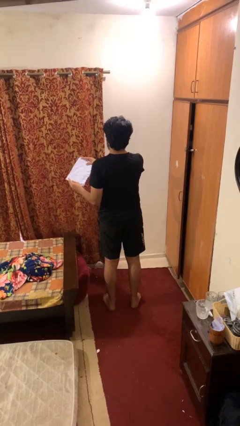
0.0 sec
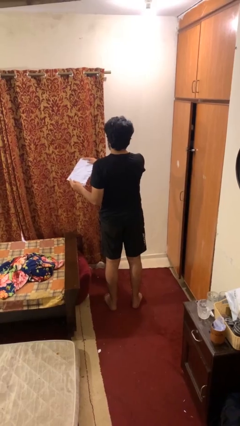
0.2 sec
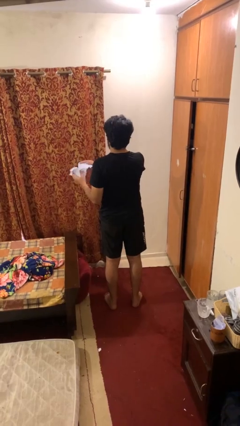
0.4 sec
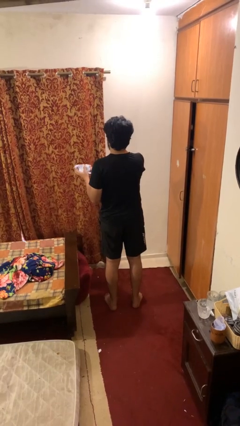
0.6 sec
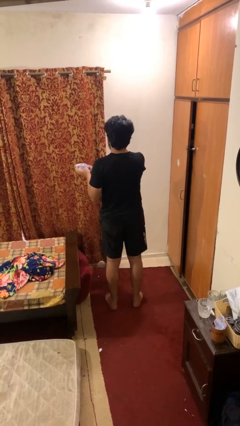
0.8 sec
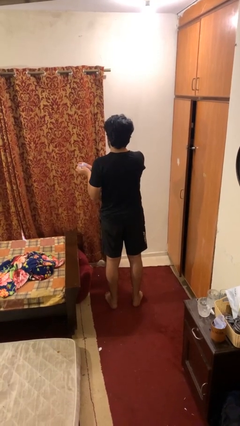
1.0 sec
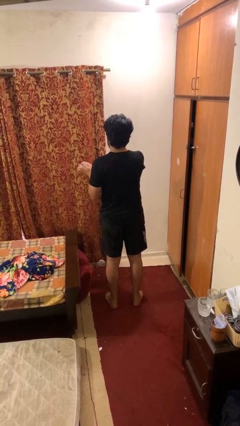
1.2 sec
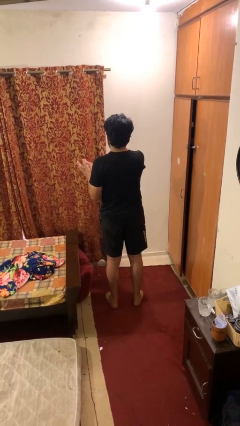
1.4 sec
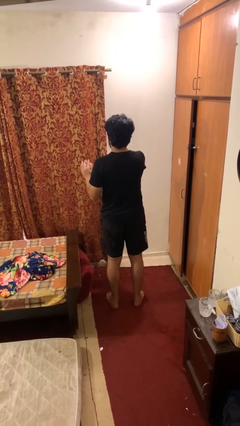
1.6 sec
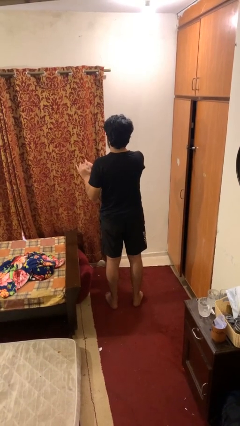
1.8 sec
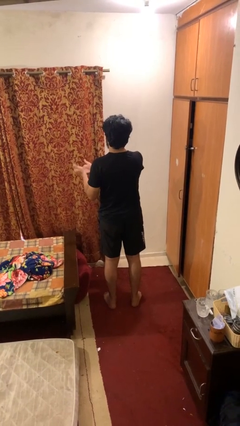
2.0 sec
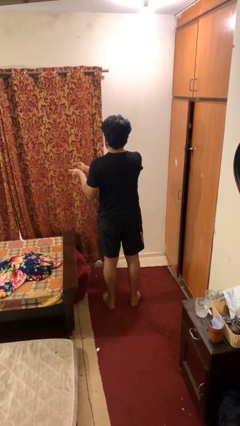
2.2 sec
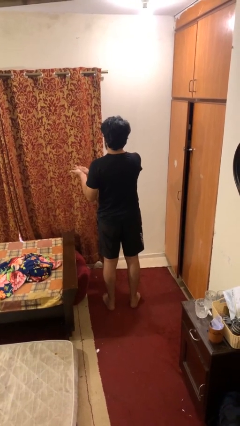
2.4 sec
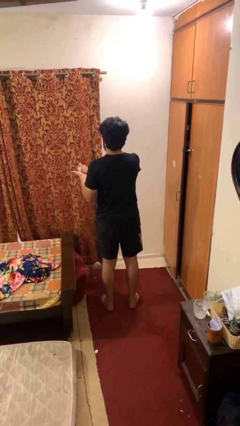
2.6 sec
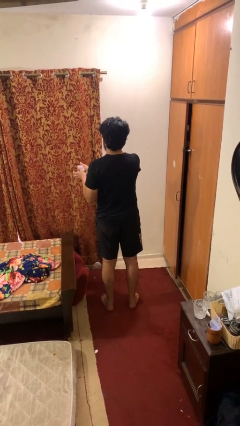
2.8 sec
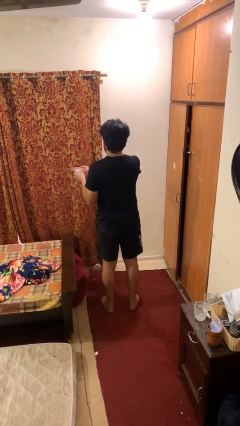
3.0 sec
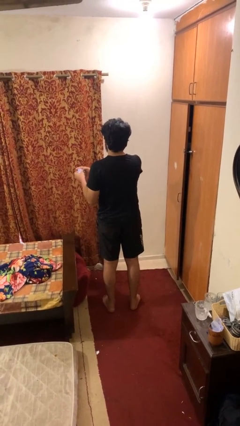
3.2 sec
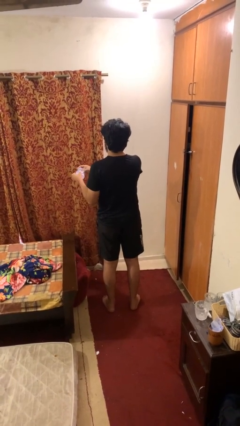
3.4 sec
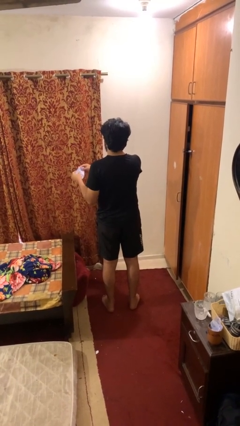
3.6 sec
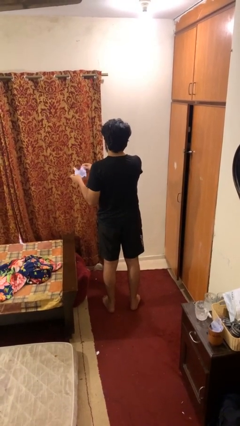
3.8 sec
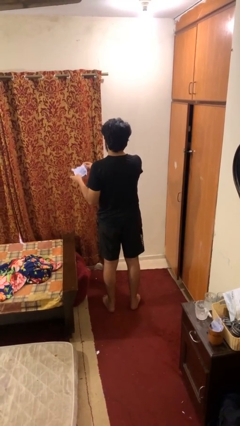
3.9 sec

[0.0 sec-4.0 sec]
person crumples paper

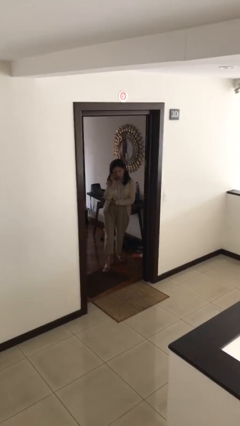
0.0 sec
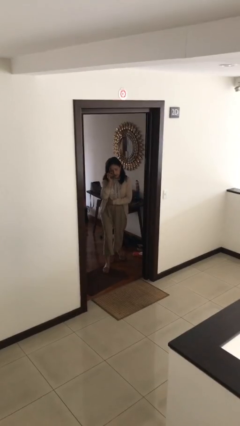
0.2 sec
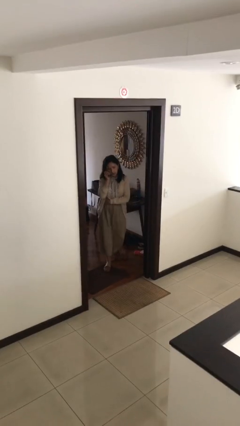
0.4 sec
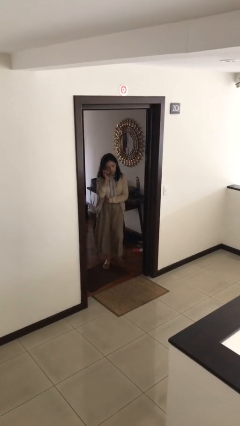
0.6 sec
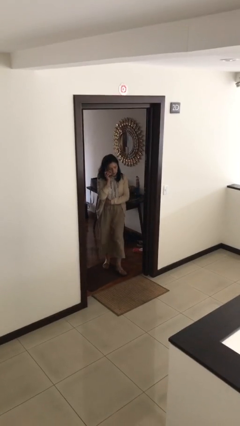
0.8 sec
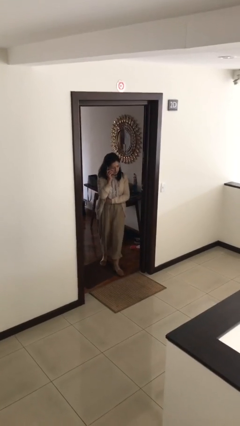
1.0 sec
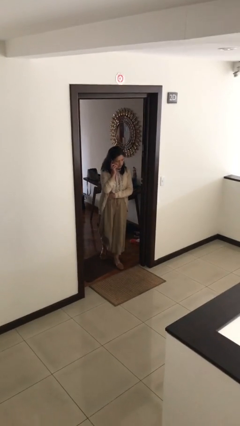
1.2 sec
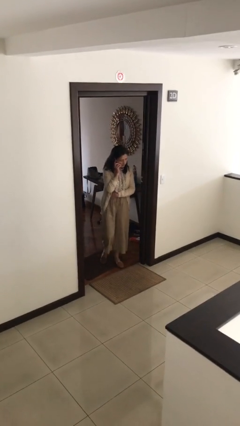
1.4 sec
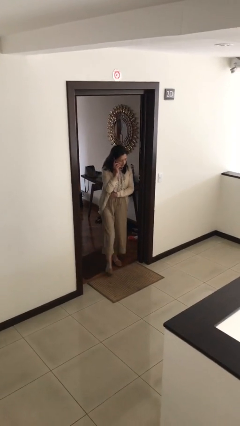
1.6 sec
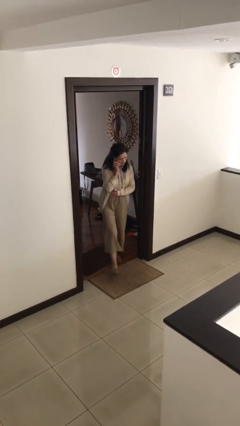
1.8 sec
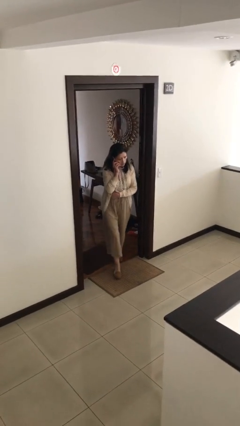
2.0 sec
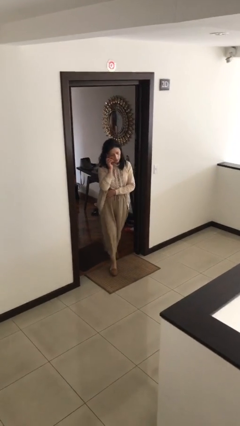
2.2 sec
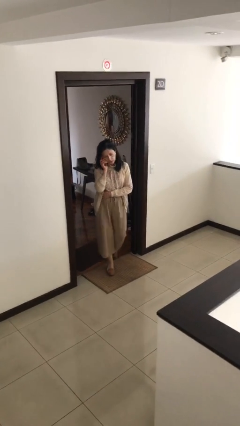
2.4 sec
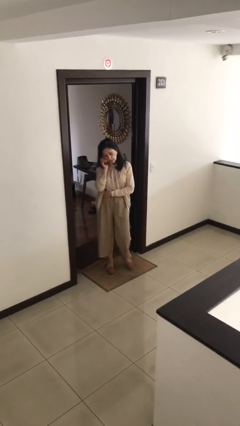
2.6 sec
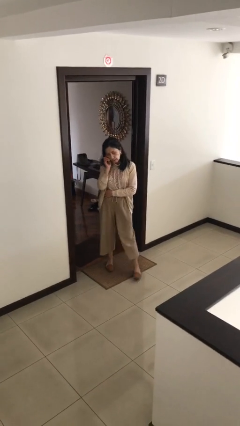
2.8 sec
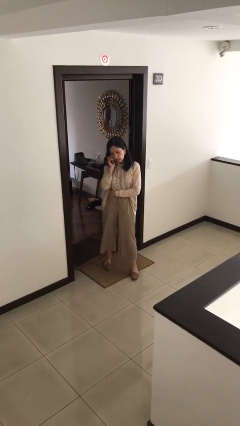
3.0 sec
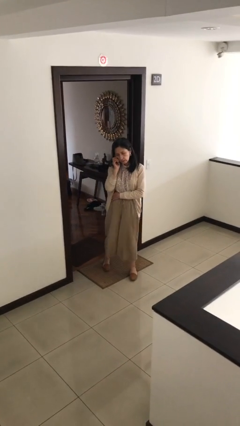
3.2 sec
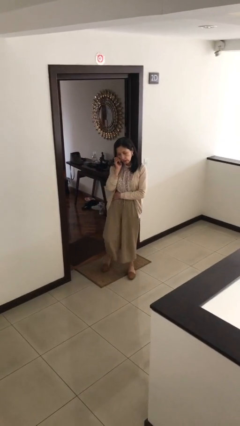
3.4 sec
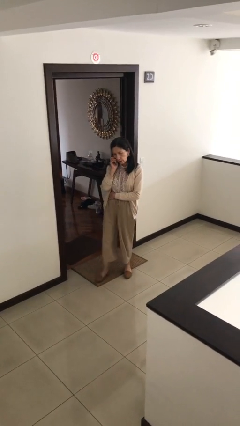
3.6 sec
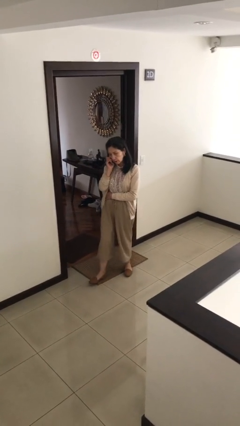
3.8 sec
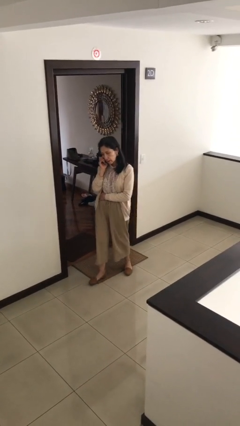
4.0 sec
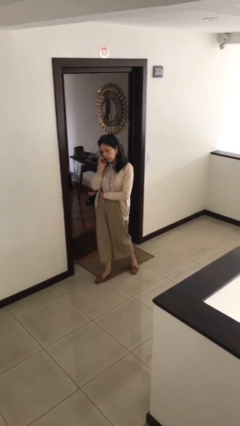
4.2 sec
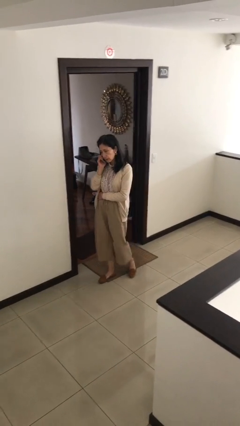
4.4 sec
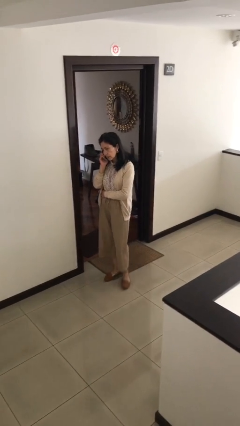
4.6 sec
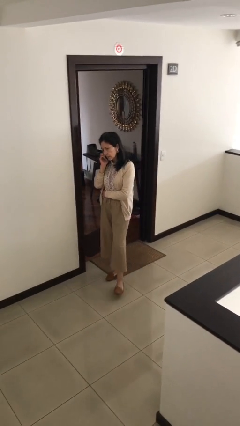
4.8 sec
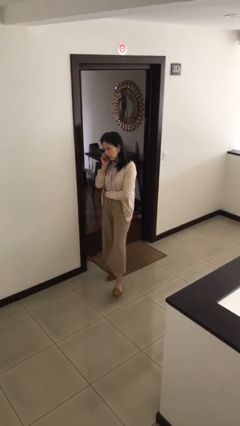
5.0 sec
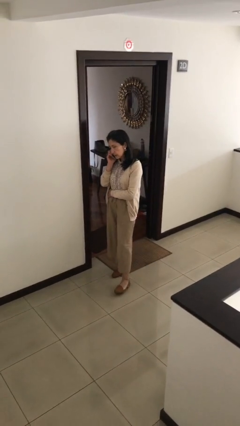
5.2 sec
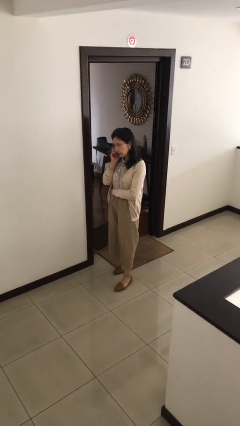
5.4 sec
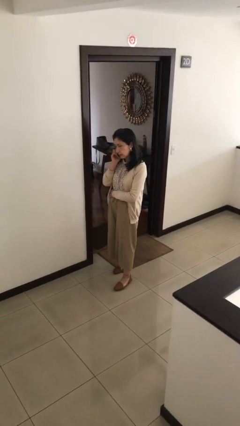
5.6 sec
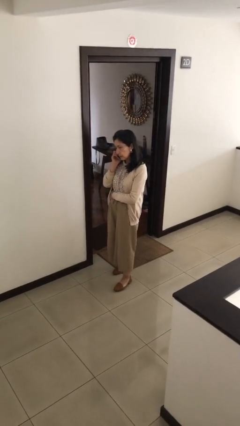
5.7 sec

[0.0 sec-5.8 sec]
person enters scene through structure

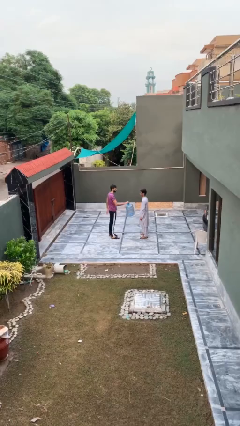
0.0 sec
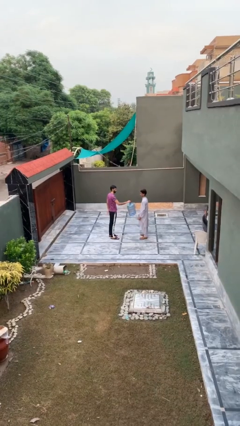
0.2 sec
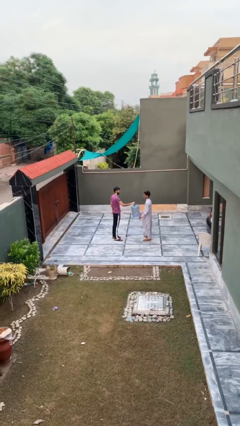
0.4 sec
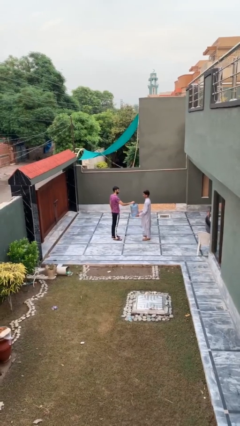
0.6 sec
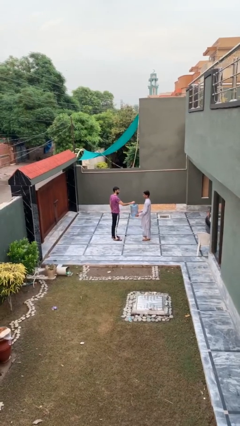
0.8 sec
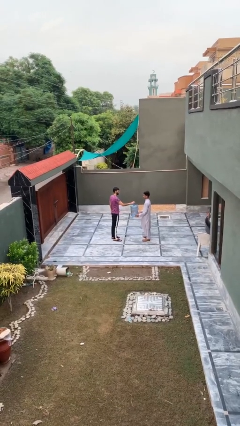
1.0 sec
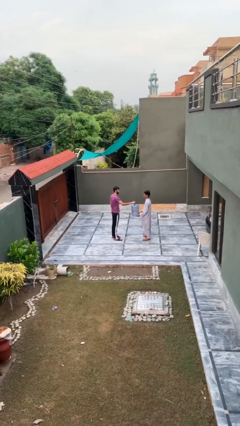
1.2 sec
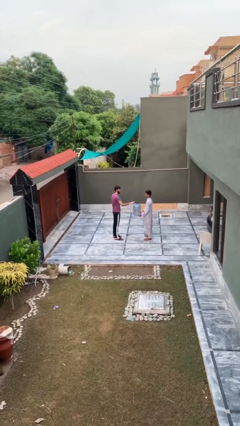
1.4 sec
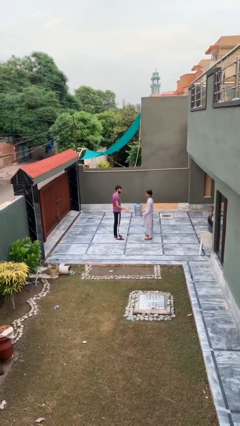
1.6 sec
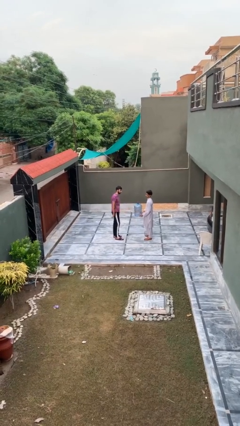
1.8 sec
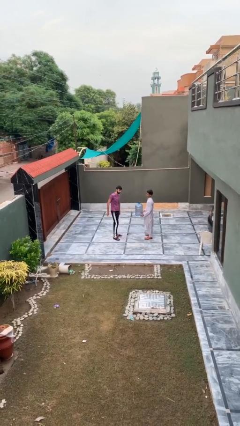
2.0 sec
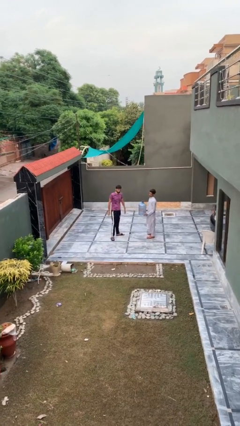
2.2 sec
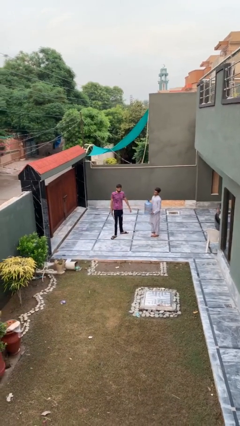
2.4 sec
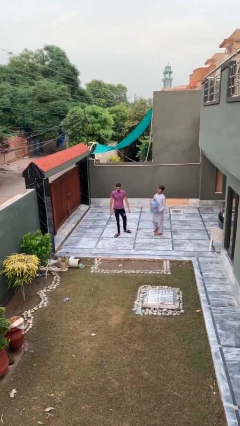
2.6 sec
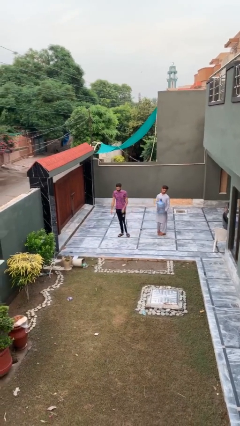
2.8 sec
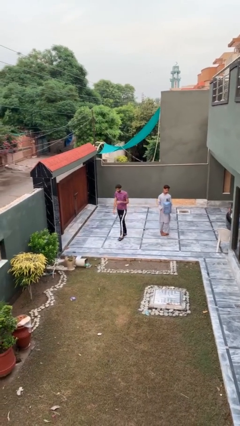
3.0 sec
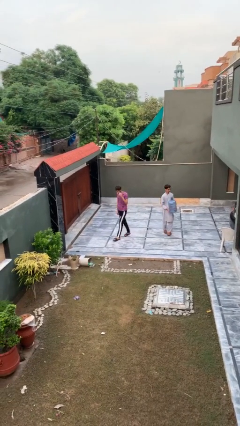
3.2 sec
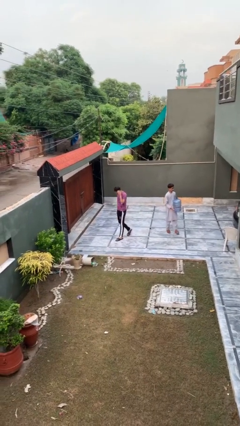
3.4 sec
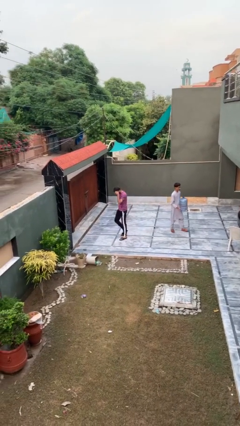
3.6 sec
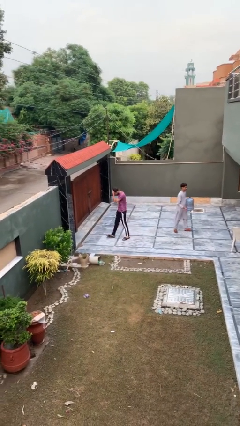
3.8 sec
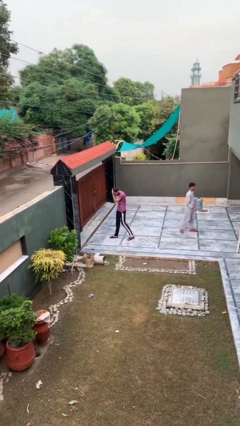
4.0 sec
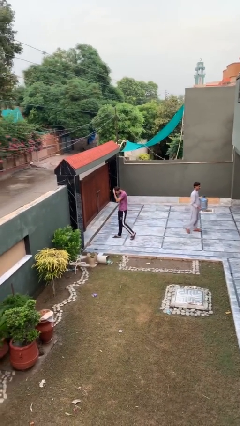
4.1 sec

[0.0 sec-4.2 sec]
person transfers object to person

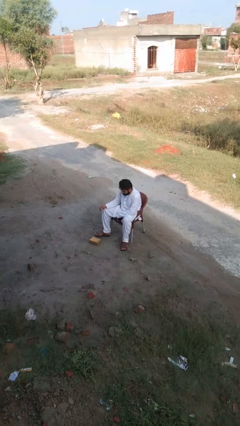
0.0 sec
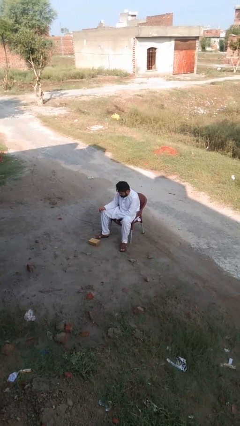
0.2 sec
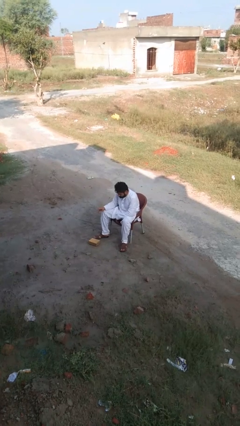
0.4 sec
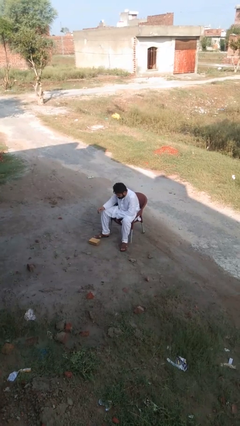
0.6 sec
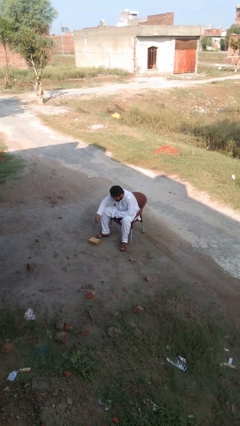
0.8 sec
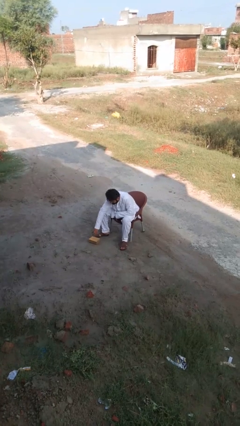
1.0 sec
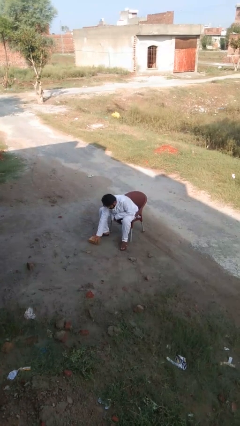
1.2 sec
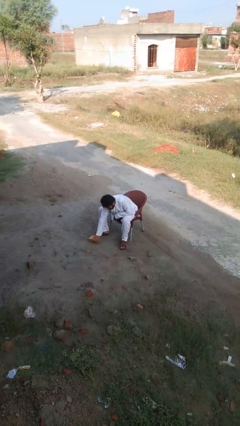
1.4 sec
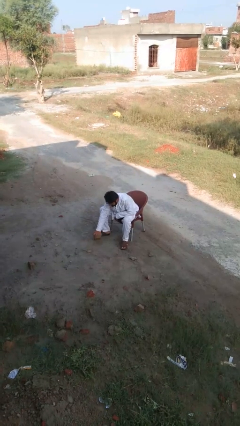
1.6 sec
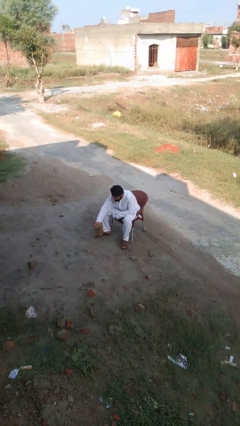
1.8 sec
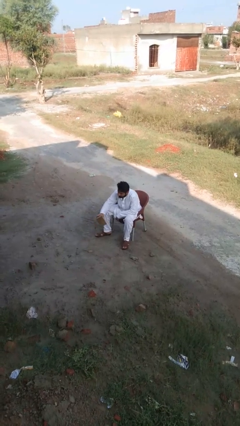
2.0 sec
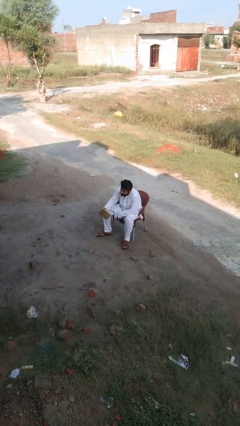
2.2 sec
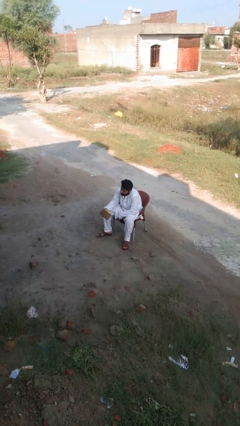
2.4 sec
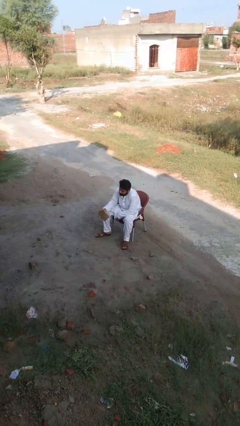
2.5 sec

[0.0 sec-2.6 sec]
person picks up object from floor

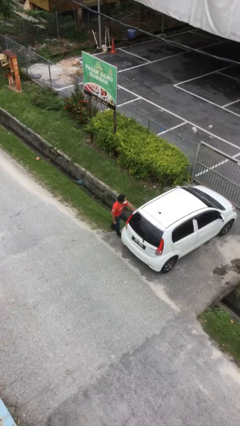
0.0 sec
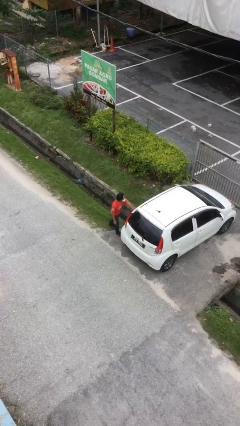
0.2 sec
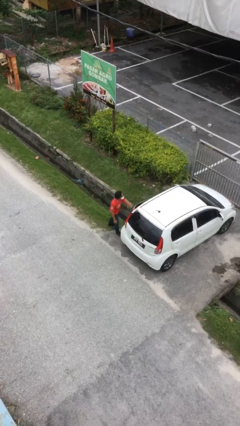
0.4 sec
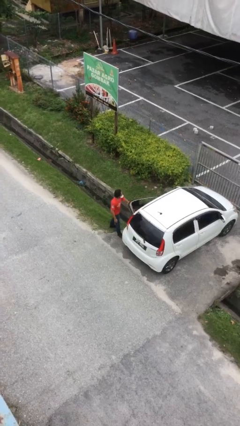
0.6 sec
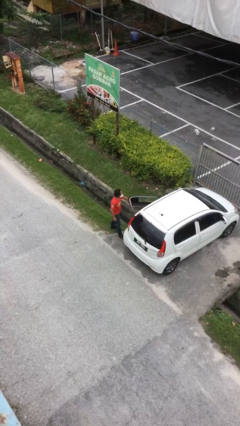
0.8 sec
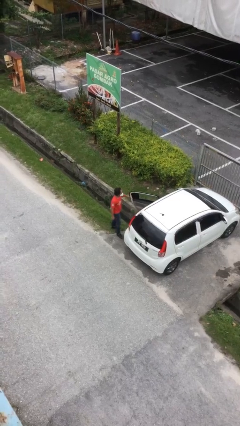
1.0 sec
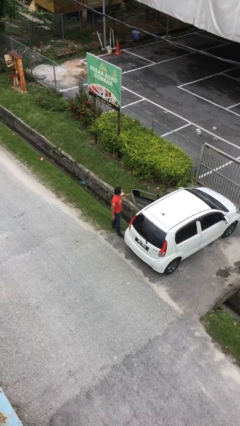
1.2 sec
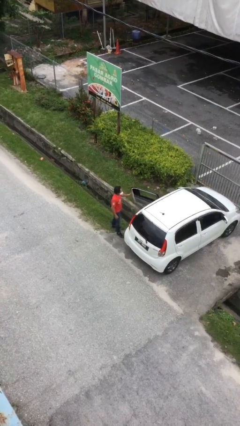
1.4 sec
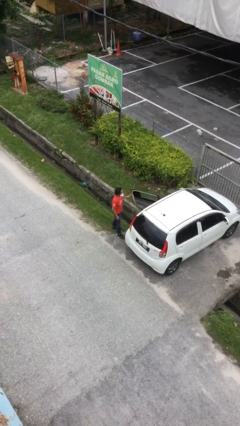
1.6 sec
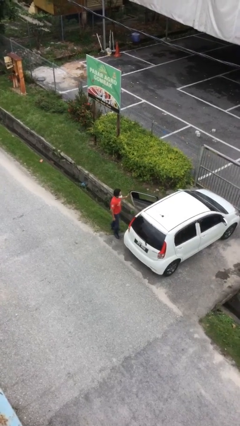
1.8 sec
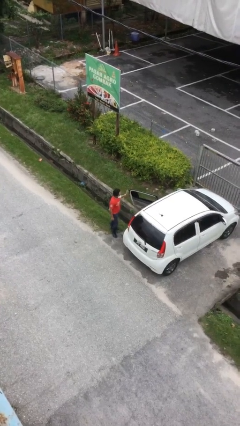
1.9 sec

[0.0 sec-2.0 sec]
person opens car door
